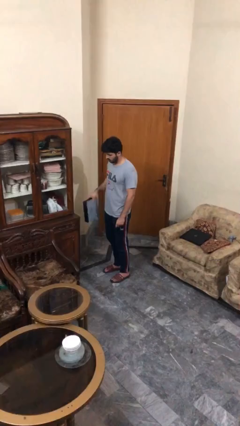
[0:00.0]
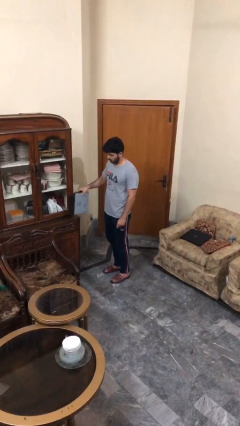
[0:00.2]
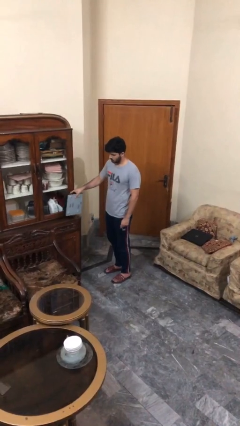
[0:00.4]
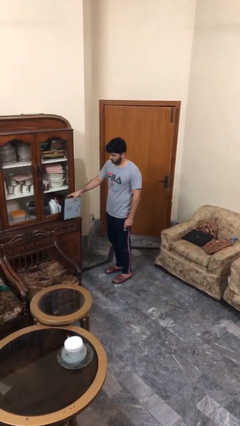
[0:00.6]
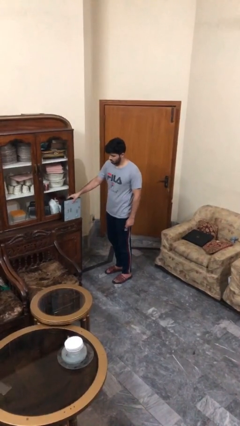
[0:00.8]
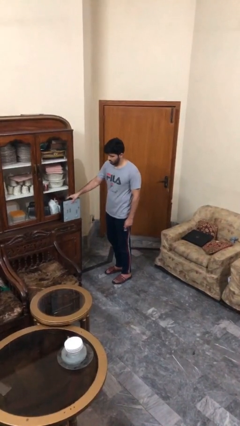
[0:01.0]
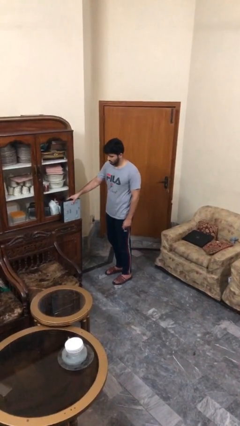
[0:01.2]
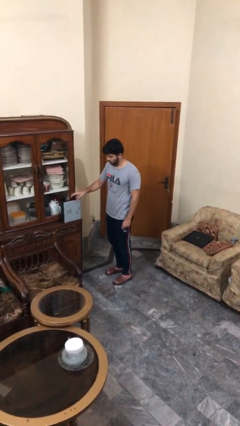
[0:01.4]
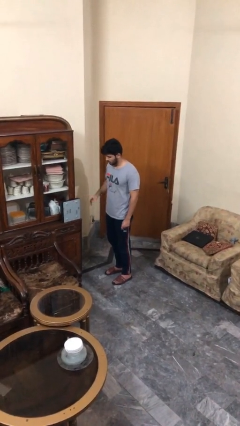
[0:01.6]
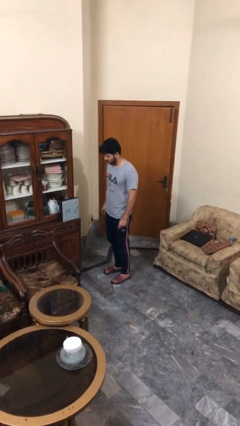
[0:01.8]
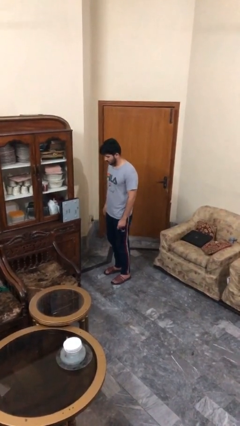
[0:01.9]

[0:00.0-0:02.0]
person puts down object on countertop

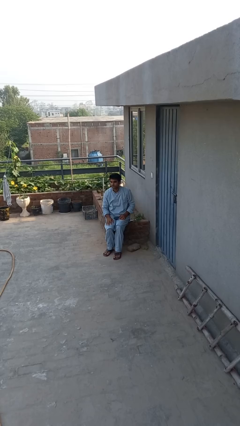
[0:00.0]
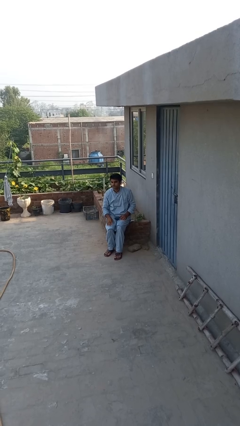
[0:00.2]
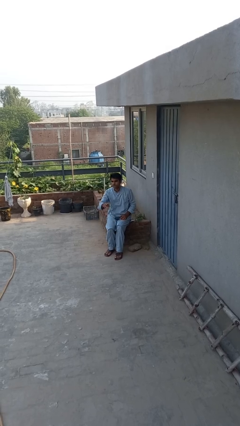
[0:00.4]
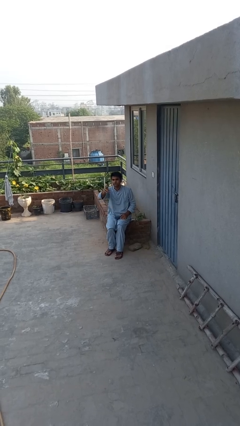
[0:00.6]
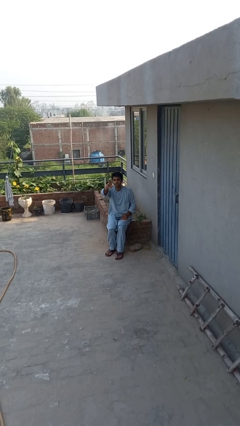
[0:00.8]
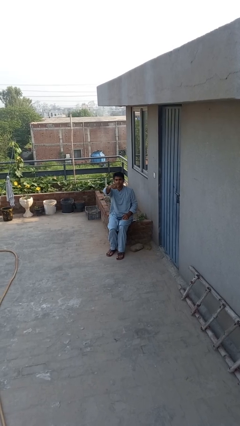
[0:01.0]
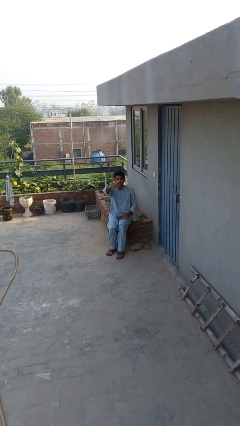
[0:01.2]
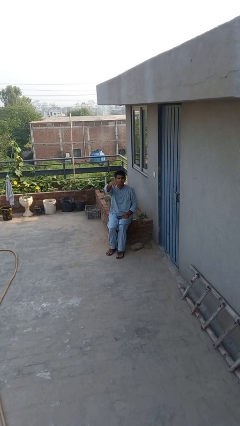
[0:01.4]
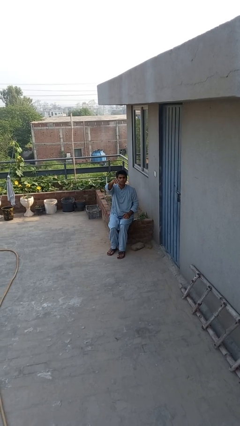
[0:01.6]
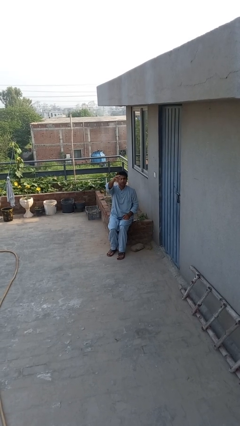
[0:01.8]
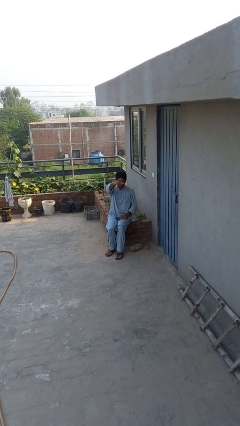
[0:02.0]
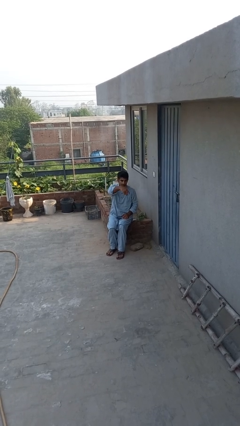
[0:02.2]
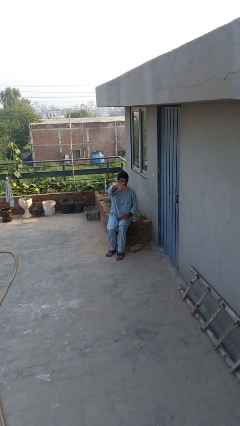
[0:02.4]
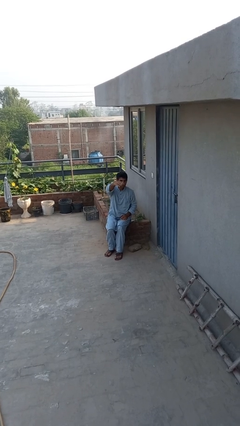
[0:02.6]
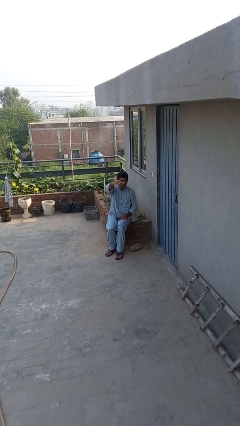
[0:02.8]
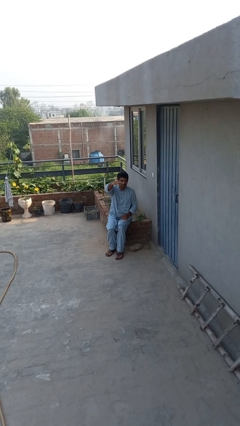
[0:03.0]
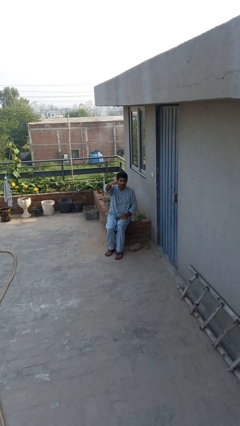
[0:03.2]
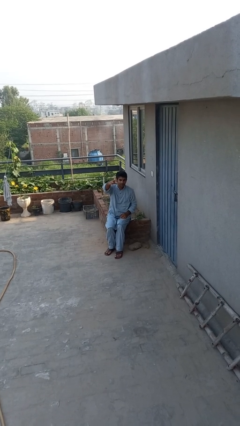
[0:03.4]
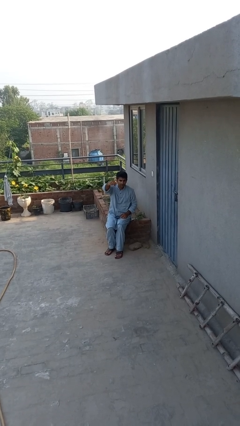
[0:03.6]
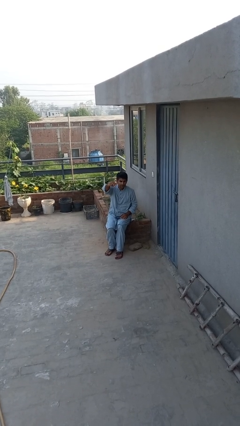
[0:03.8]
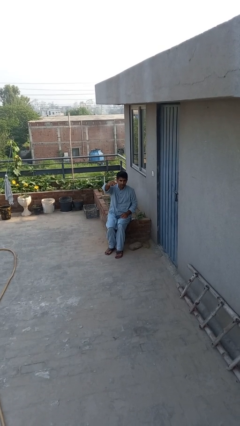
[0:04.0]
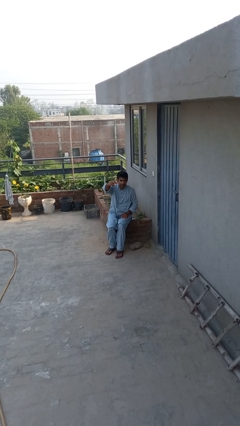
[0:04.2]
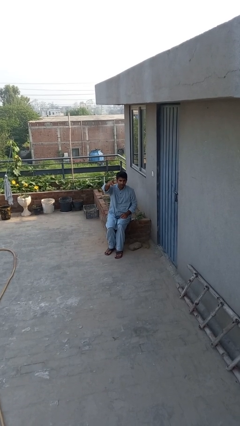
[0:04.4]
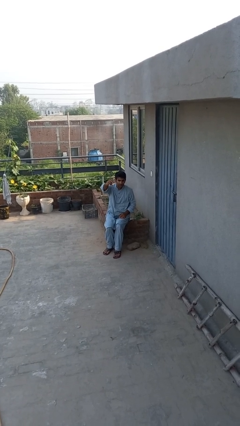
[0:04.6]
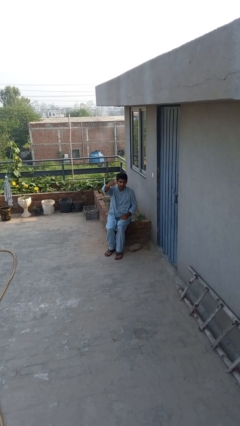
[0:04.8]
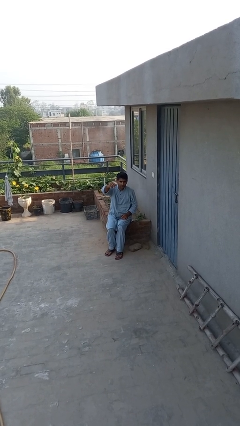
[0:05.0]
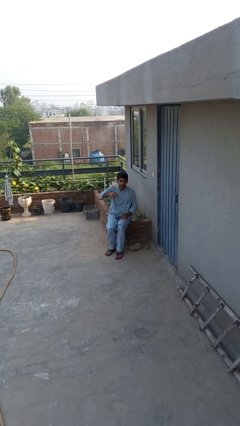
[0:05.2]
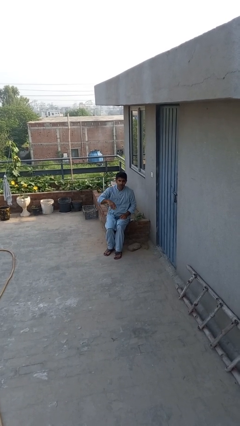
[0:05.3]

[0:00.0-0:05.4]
person gestures come here

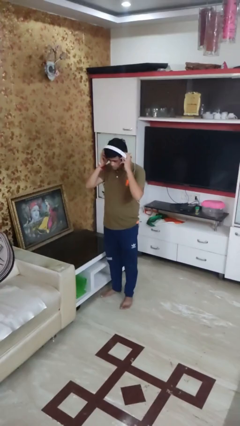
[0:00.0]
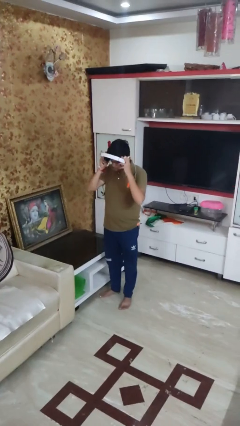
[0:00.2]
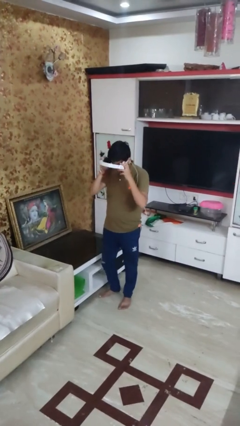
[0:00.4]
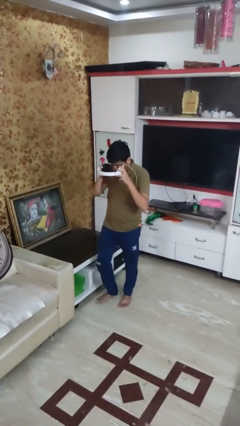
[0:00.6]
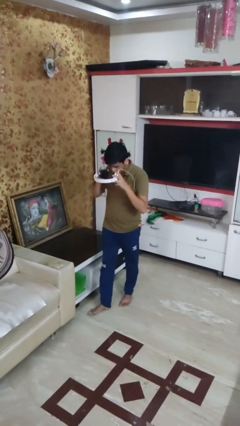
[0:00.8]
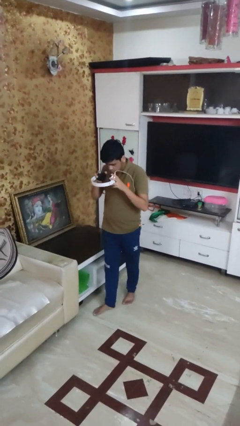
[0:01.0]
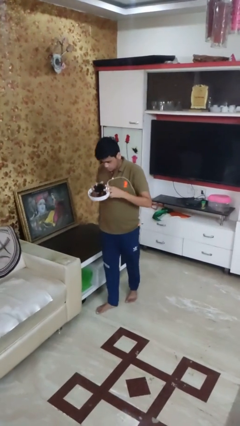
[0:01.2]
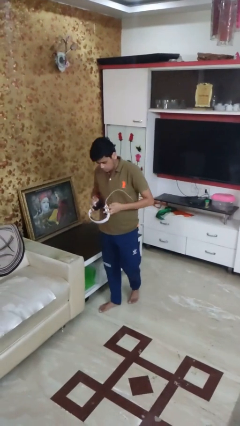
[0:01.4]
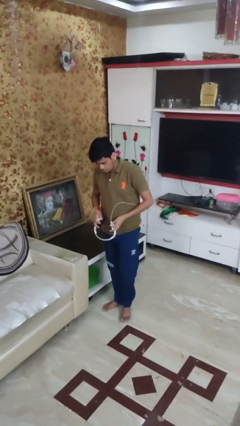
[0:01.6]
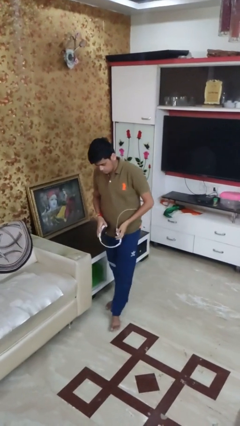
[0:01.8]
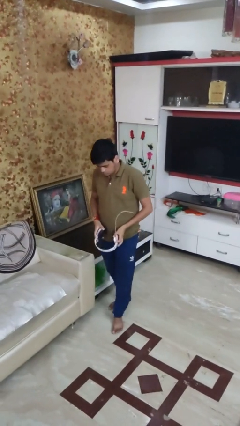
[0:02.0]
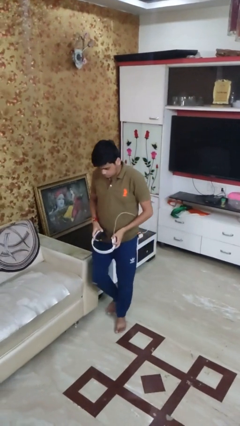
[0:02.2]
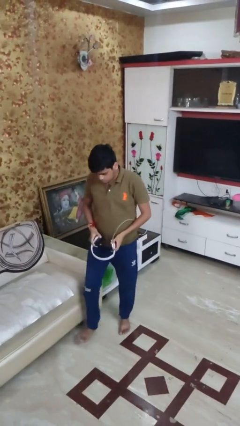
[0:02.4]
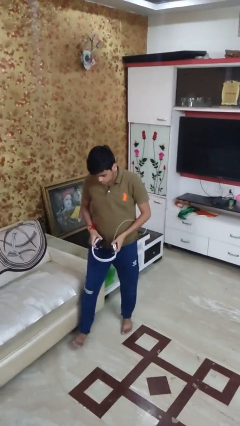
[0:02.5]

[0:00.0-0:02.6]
person takes off headphones

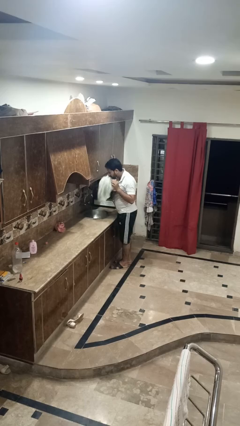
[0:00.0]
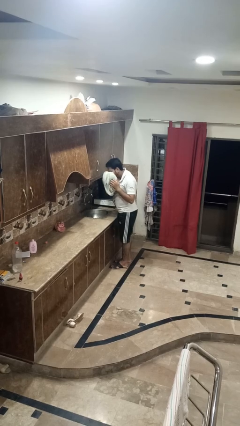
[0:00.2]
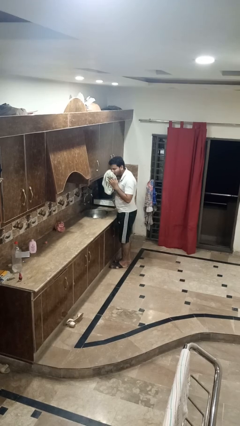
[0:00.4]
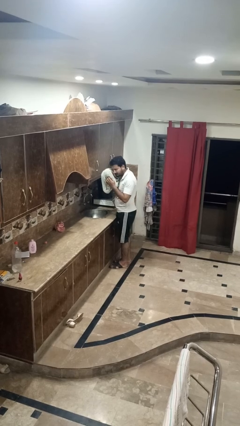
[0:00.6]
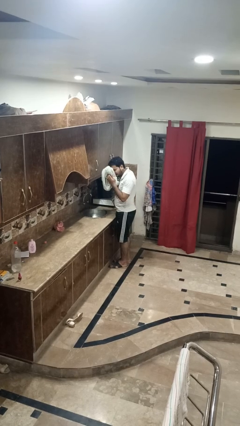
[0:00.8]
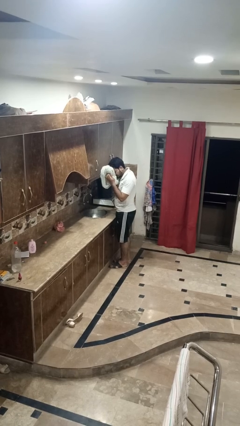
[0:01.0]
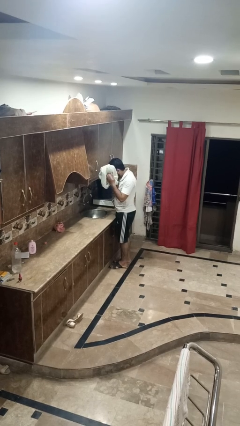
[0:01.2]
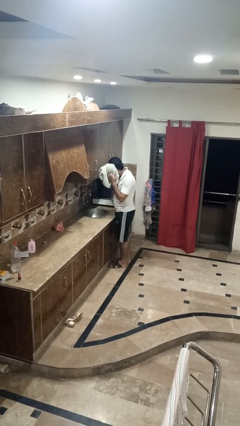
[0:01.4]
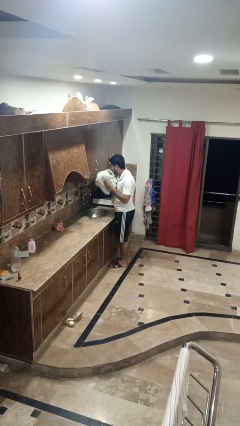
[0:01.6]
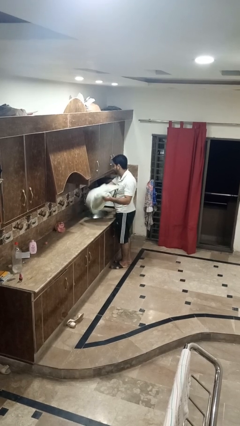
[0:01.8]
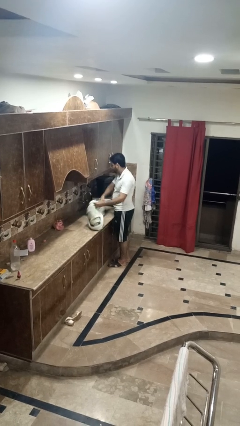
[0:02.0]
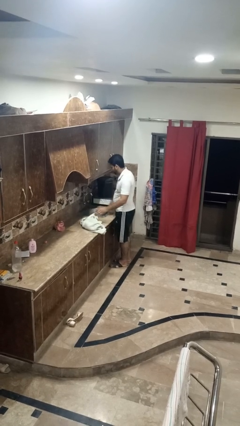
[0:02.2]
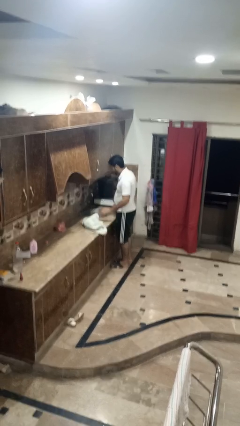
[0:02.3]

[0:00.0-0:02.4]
person dries face with towel

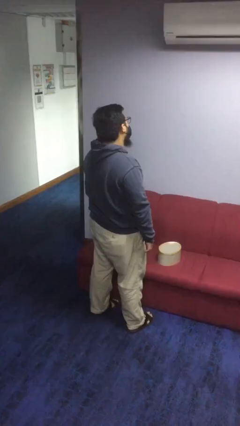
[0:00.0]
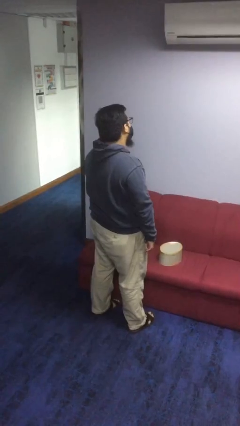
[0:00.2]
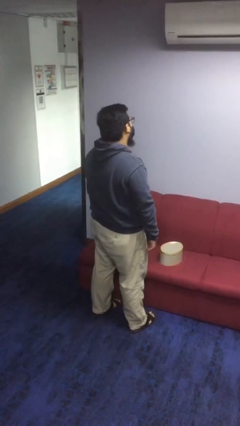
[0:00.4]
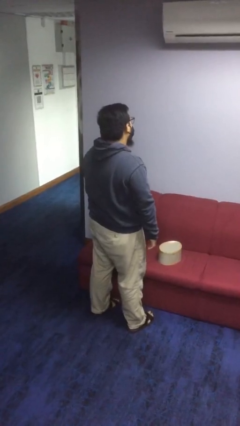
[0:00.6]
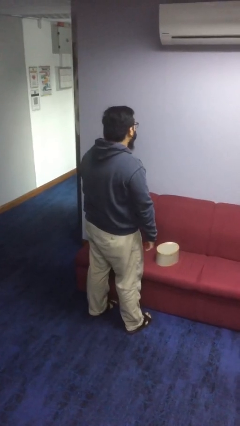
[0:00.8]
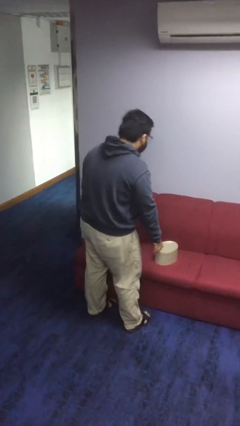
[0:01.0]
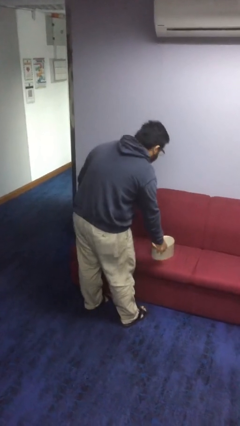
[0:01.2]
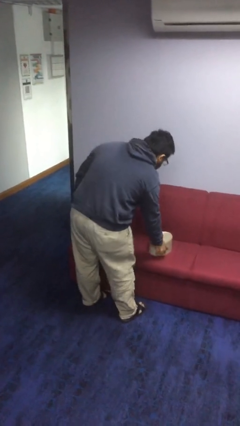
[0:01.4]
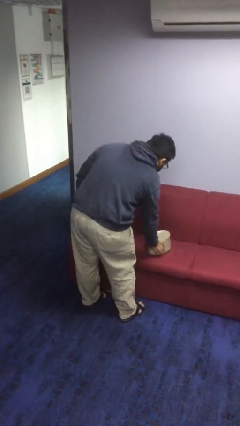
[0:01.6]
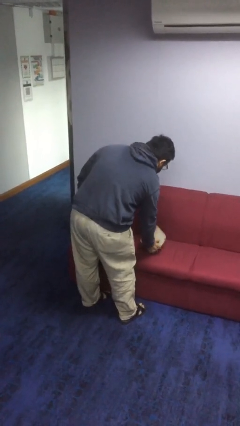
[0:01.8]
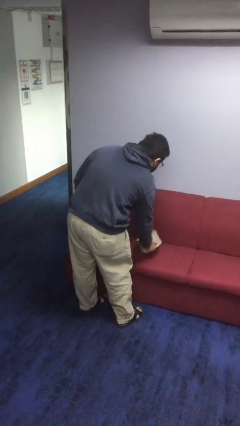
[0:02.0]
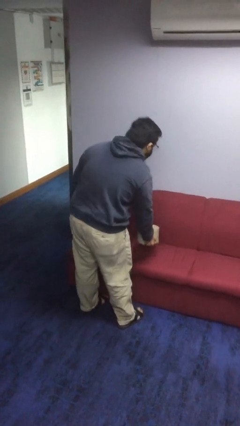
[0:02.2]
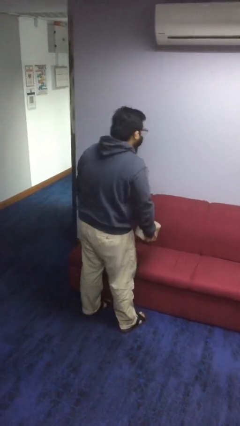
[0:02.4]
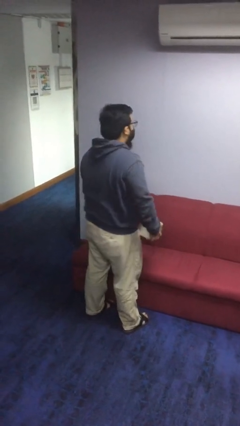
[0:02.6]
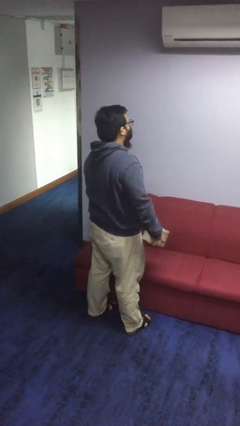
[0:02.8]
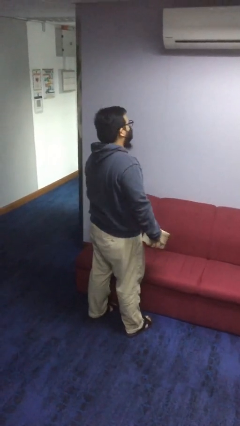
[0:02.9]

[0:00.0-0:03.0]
person picks up object from couch

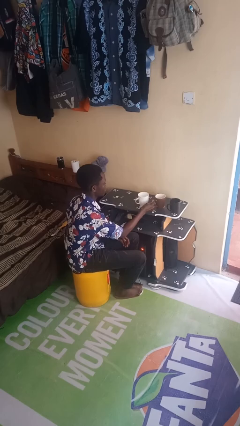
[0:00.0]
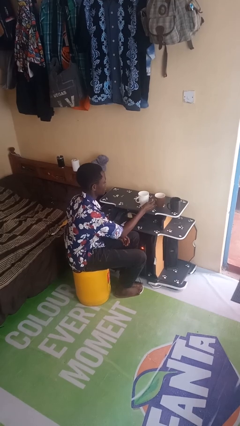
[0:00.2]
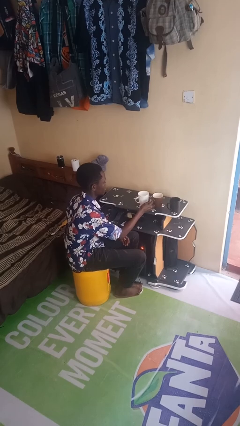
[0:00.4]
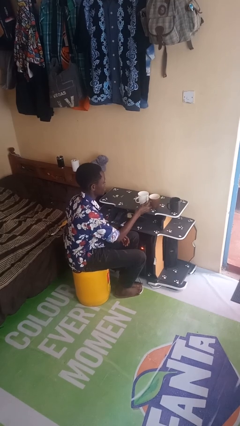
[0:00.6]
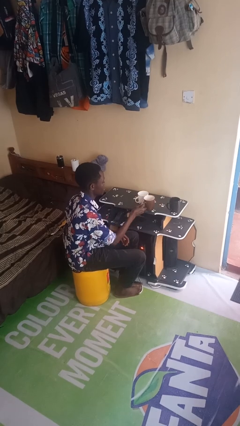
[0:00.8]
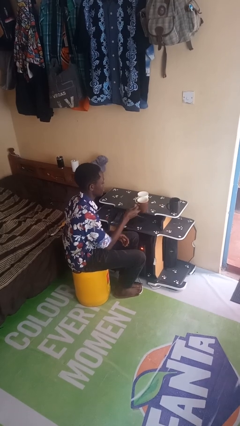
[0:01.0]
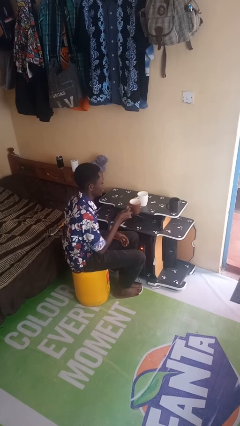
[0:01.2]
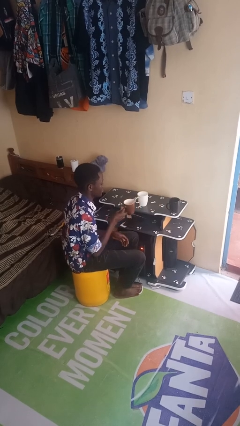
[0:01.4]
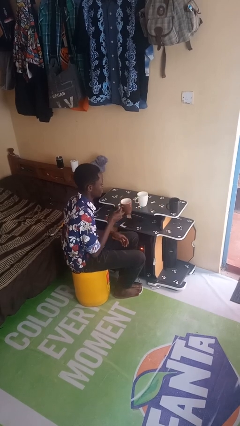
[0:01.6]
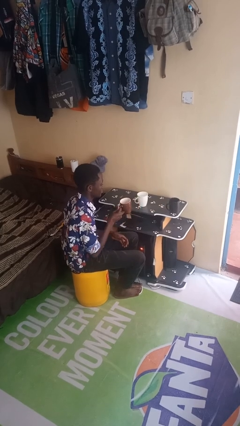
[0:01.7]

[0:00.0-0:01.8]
person picks up object from table

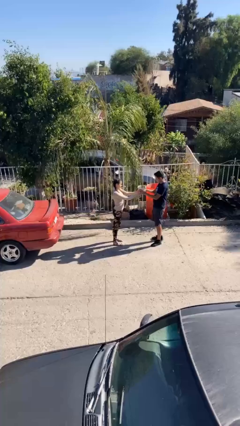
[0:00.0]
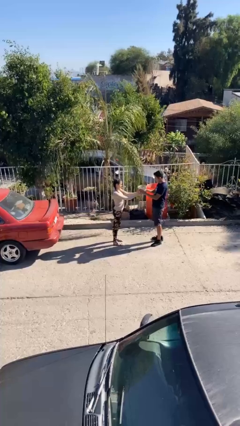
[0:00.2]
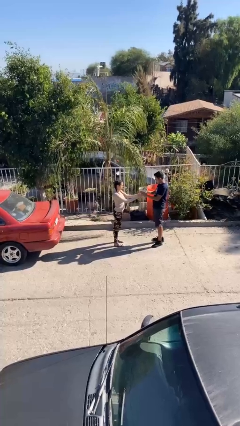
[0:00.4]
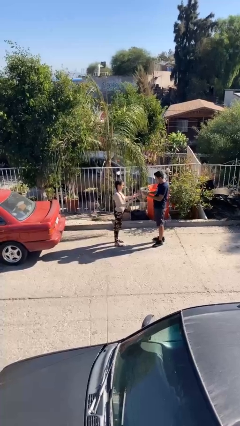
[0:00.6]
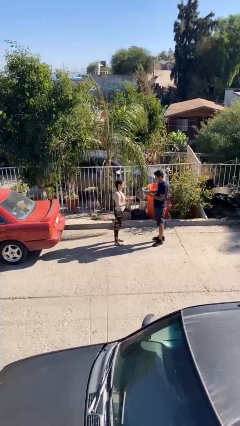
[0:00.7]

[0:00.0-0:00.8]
person transfers object to person
